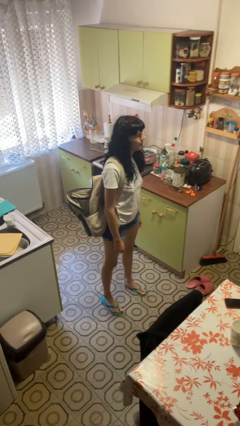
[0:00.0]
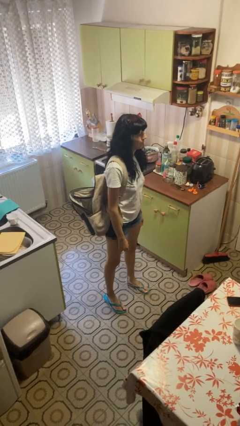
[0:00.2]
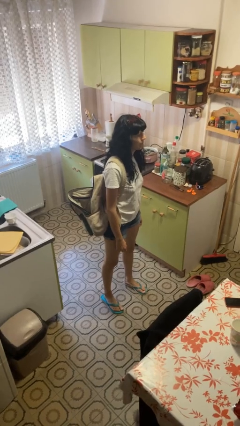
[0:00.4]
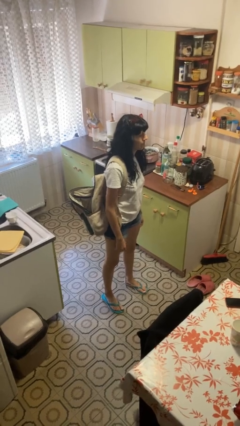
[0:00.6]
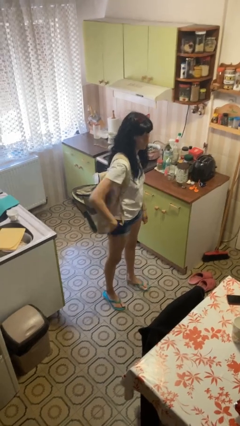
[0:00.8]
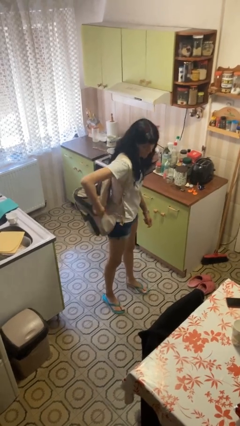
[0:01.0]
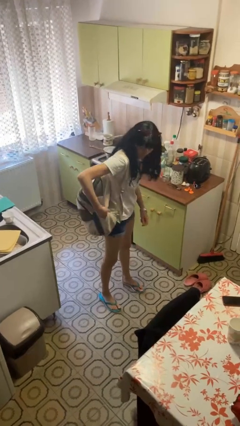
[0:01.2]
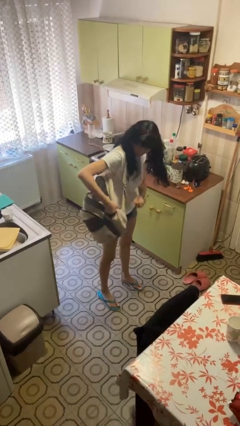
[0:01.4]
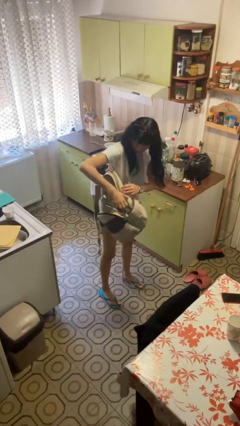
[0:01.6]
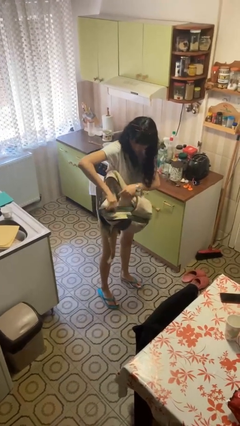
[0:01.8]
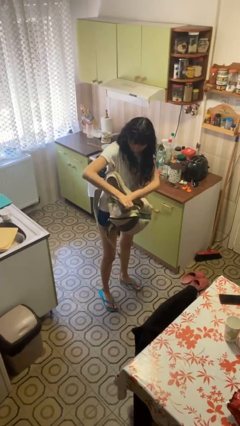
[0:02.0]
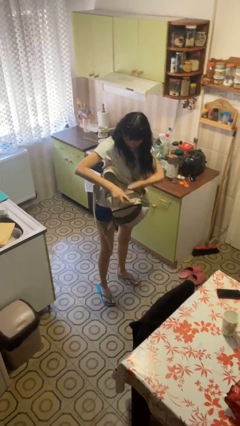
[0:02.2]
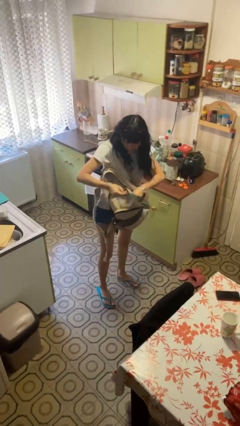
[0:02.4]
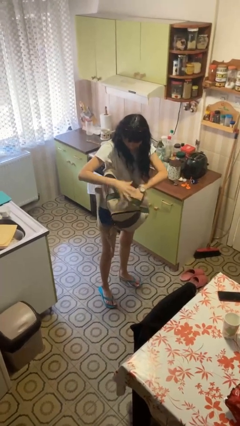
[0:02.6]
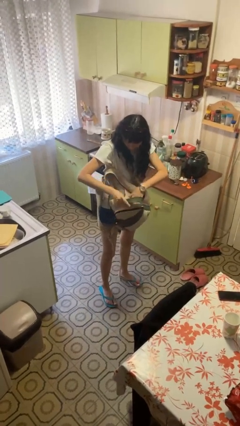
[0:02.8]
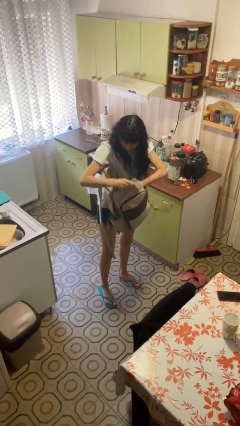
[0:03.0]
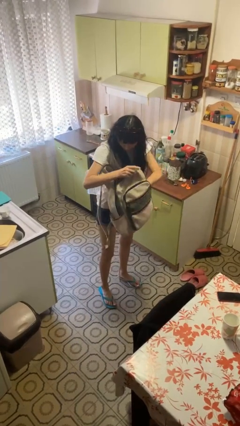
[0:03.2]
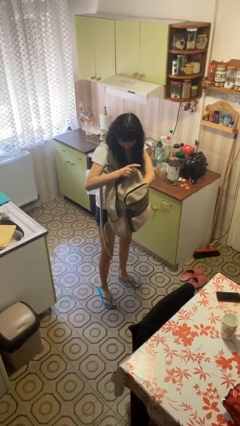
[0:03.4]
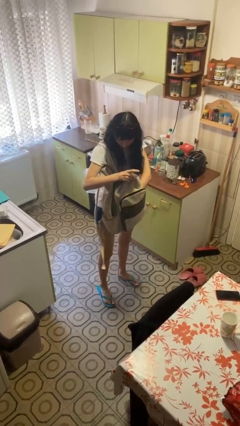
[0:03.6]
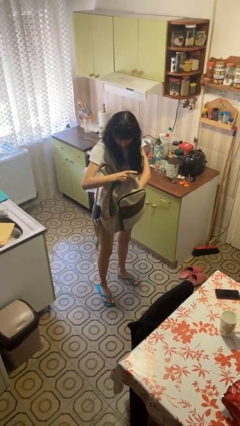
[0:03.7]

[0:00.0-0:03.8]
person searches in backpack

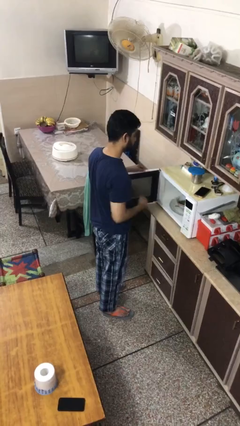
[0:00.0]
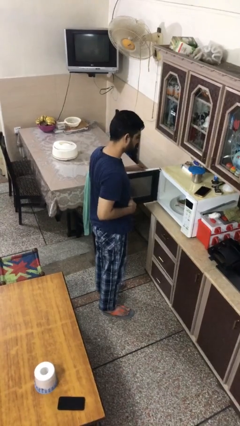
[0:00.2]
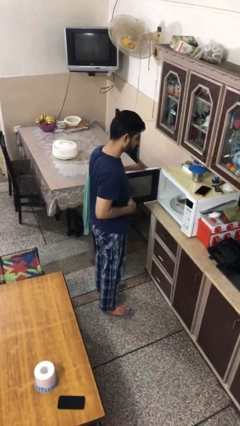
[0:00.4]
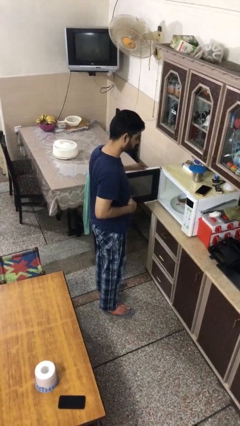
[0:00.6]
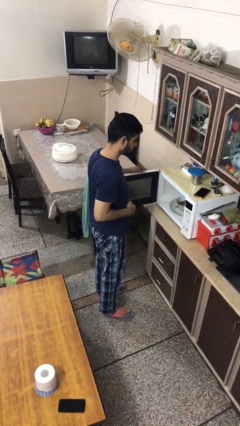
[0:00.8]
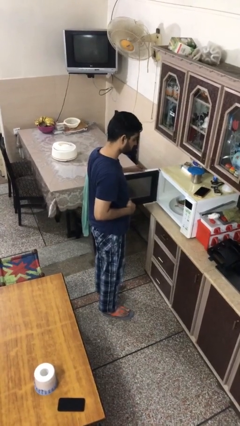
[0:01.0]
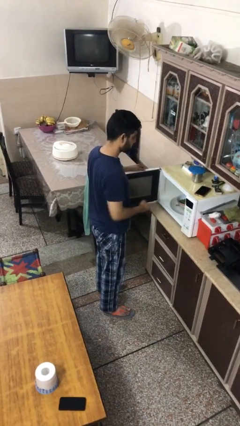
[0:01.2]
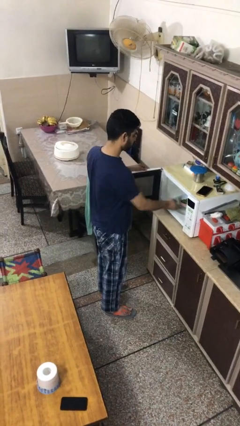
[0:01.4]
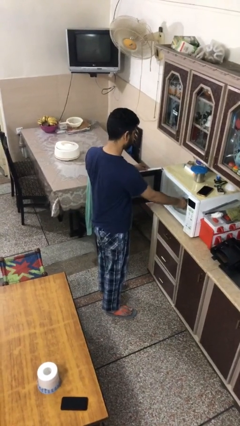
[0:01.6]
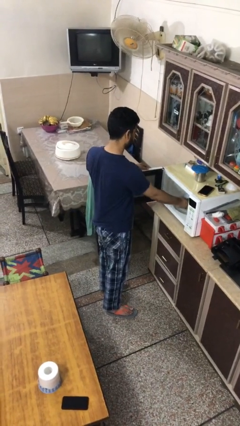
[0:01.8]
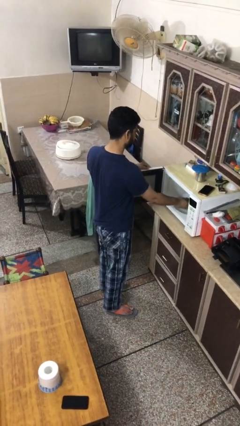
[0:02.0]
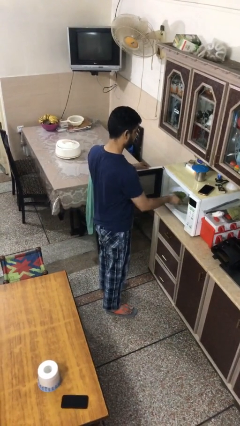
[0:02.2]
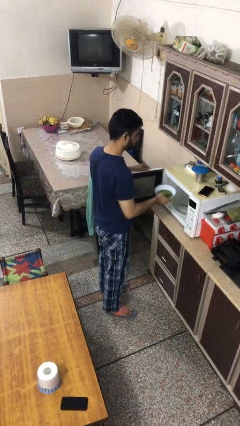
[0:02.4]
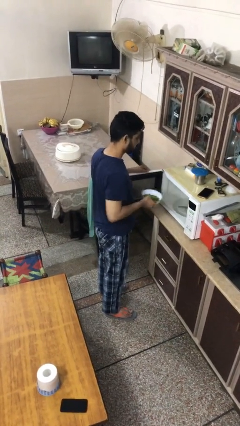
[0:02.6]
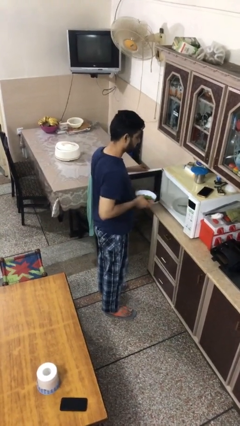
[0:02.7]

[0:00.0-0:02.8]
person takes object from oven

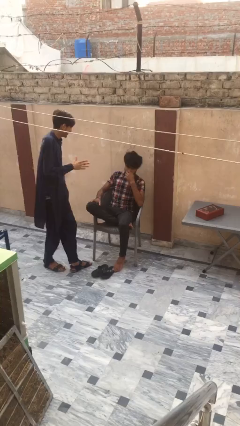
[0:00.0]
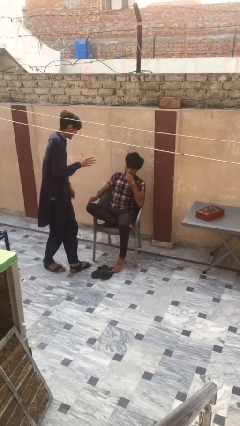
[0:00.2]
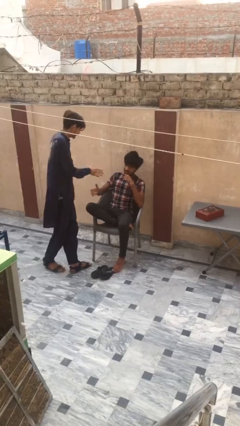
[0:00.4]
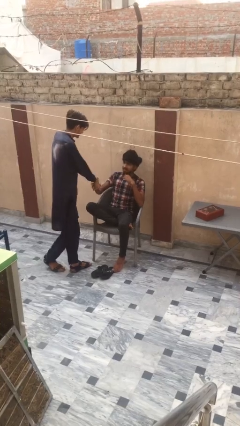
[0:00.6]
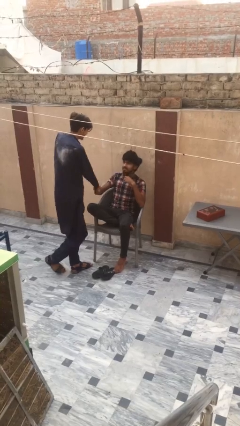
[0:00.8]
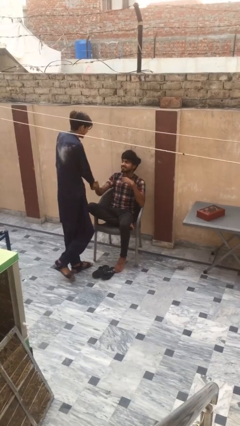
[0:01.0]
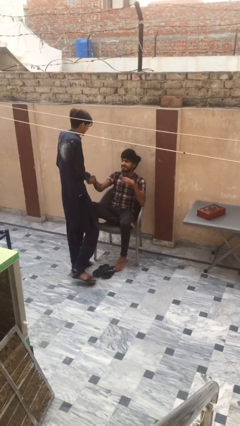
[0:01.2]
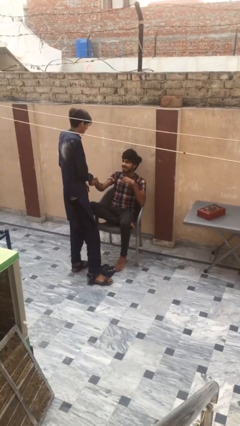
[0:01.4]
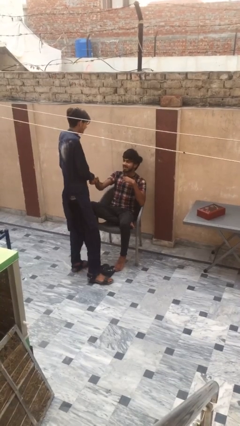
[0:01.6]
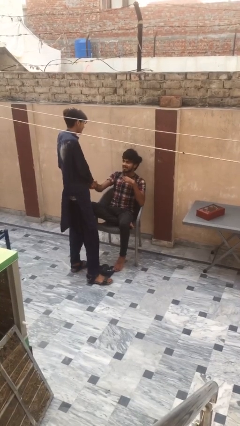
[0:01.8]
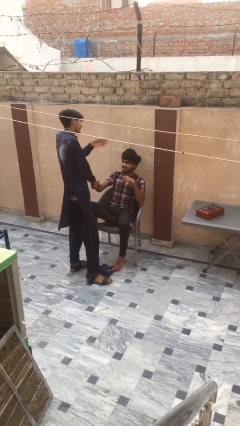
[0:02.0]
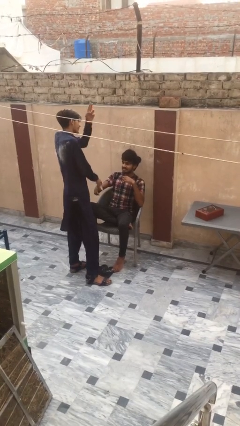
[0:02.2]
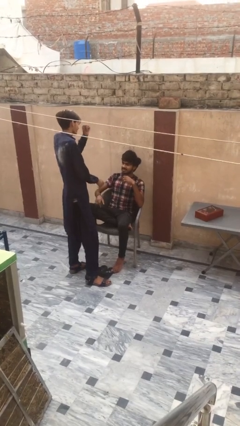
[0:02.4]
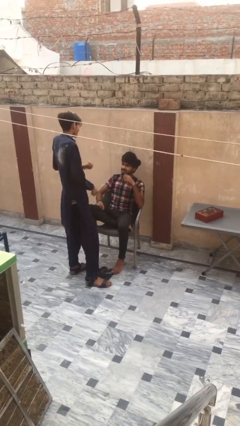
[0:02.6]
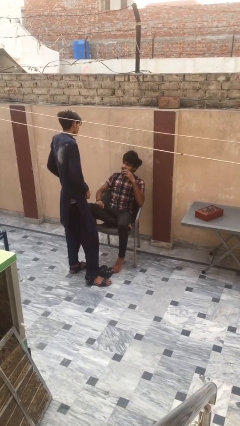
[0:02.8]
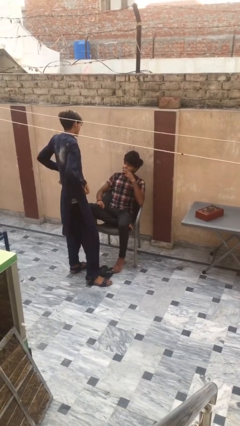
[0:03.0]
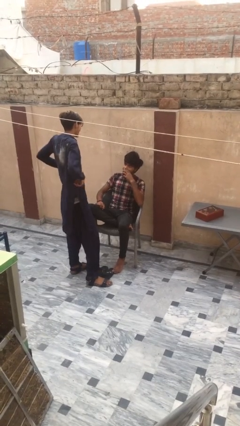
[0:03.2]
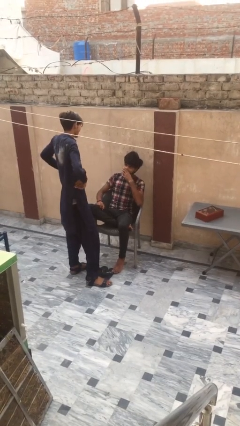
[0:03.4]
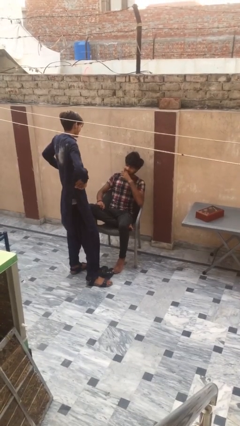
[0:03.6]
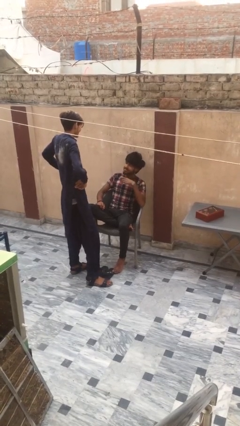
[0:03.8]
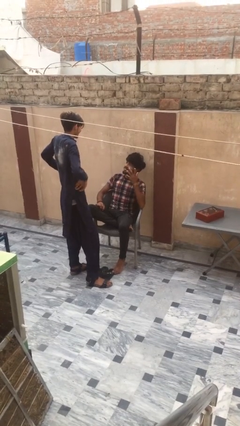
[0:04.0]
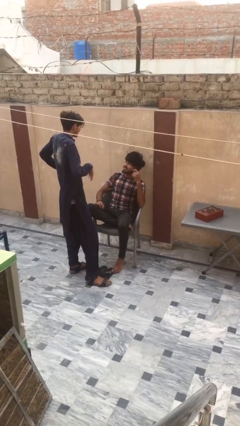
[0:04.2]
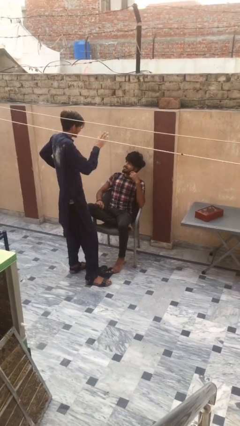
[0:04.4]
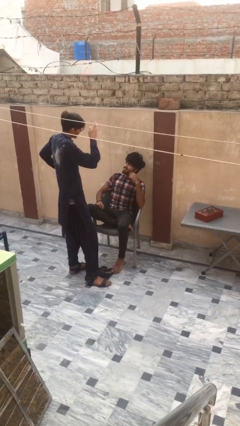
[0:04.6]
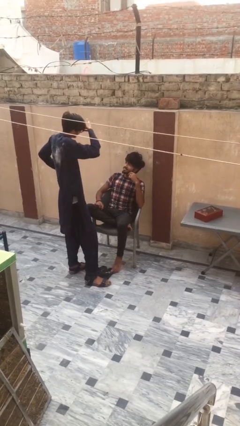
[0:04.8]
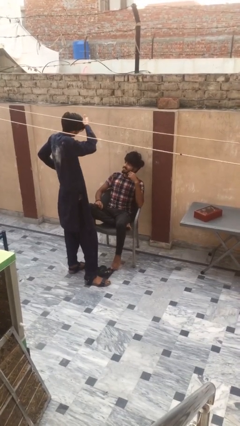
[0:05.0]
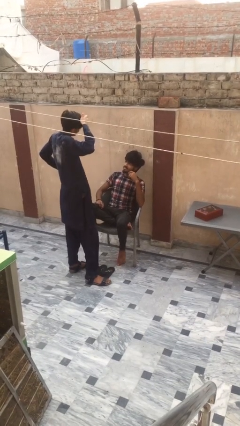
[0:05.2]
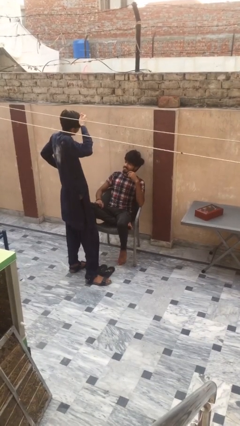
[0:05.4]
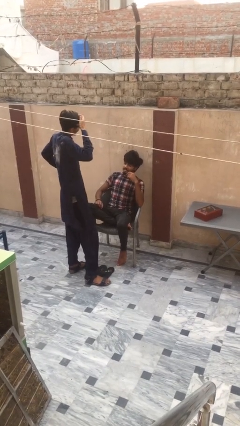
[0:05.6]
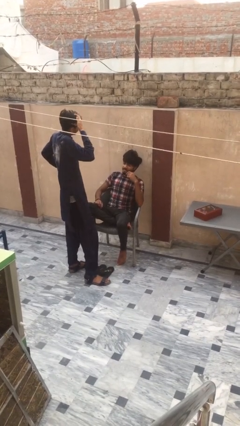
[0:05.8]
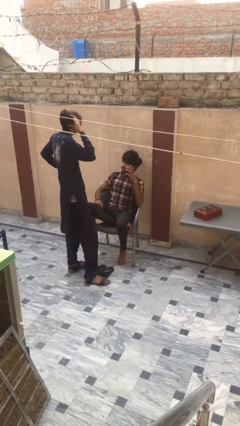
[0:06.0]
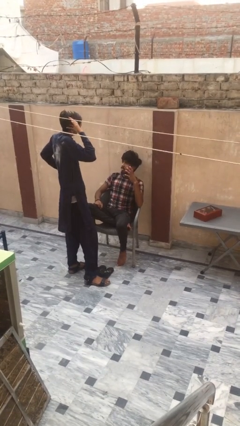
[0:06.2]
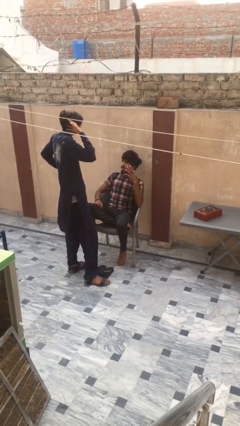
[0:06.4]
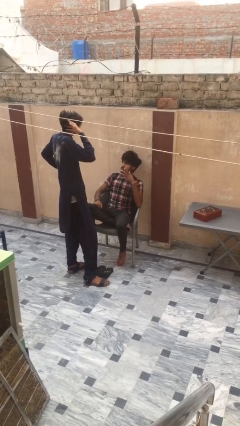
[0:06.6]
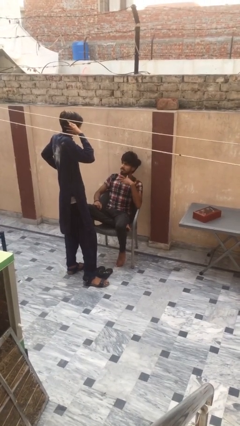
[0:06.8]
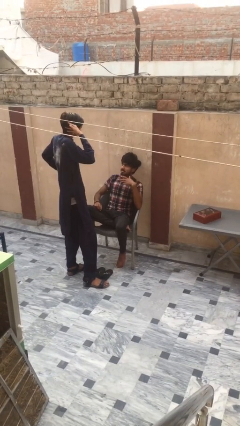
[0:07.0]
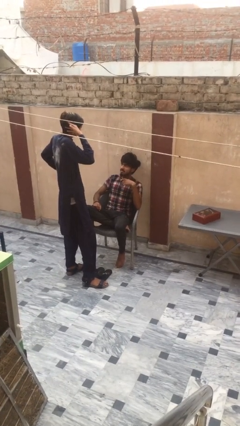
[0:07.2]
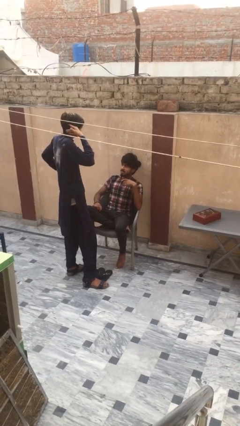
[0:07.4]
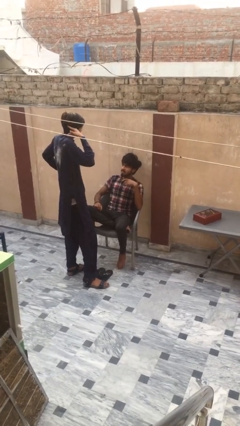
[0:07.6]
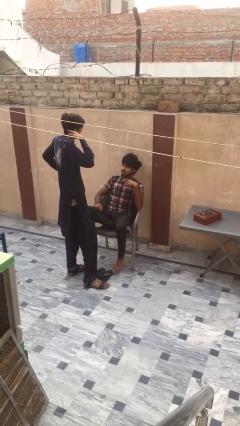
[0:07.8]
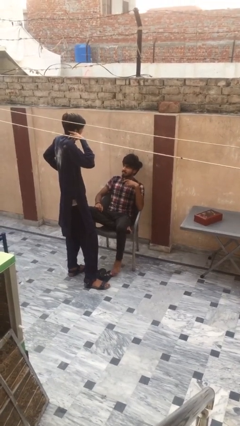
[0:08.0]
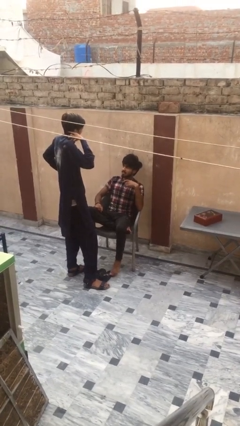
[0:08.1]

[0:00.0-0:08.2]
person shakes hand

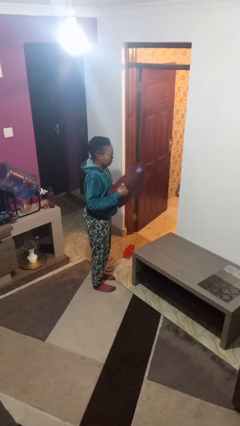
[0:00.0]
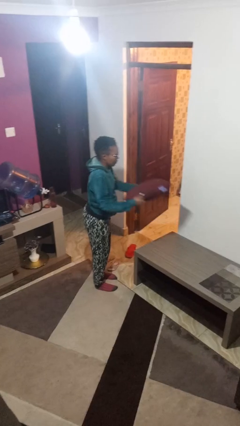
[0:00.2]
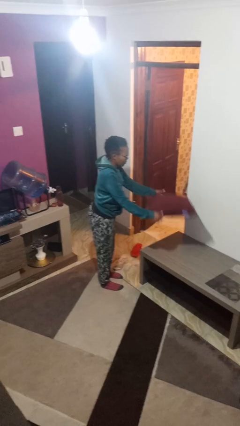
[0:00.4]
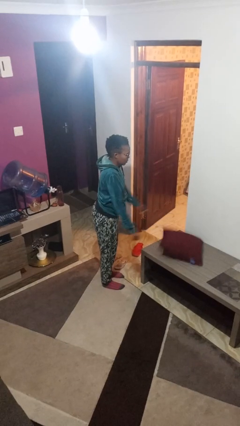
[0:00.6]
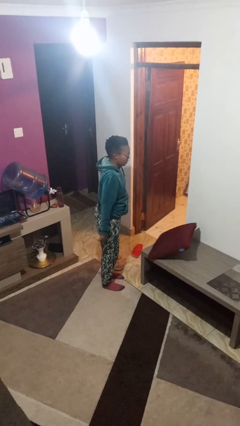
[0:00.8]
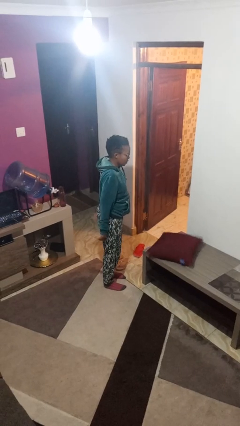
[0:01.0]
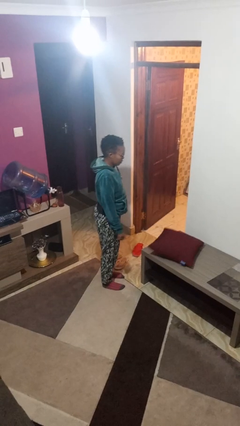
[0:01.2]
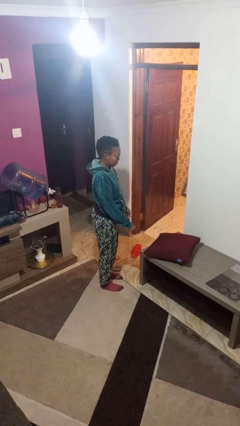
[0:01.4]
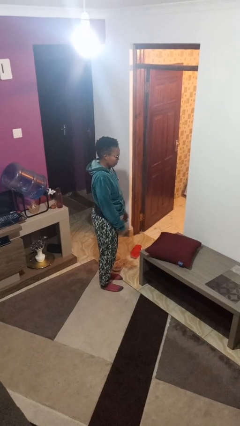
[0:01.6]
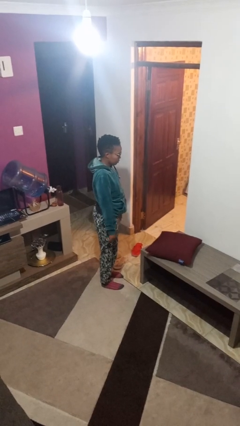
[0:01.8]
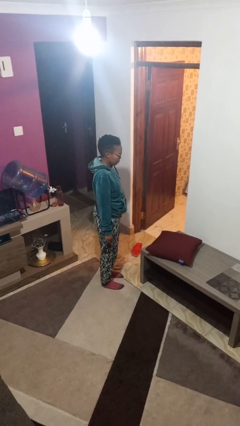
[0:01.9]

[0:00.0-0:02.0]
person throws object on table

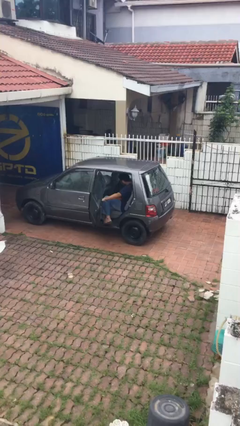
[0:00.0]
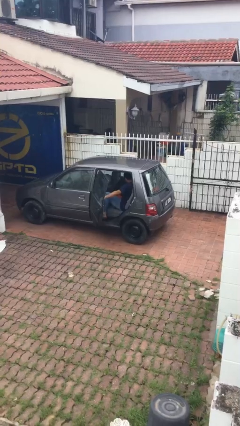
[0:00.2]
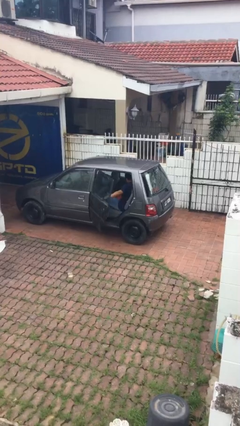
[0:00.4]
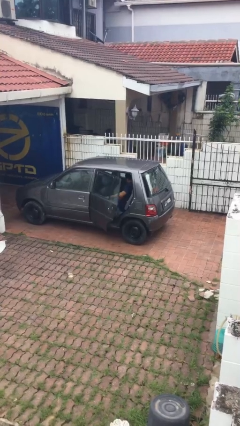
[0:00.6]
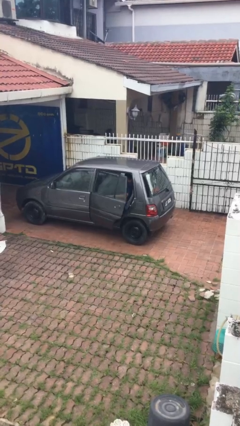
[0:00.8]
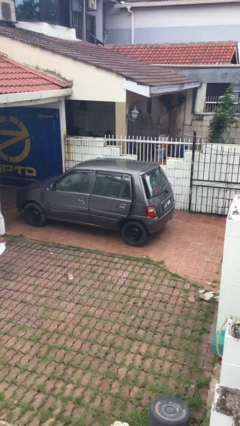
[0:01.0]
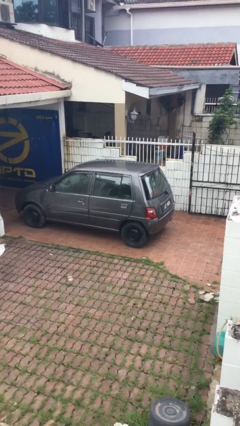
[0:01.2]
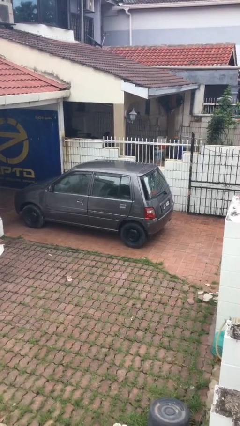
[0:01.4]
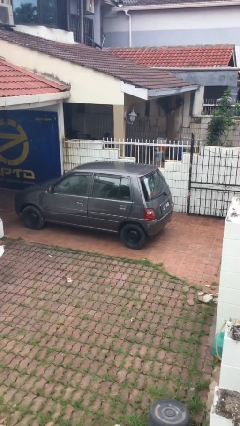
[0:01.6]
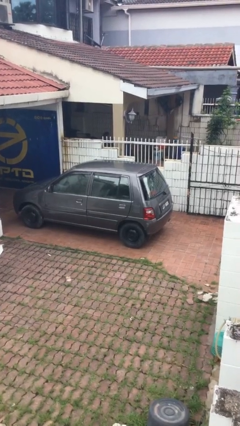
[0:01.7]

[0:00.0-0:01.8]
person closes car door
